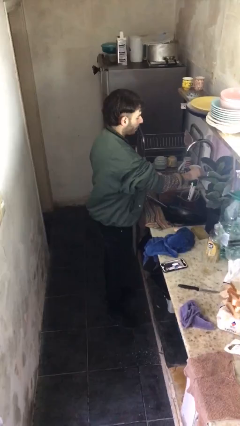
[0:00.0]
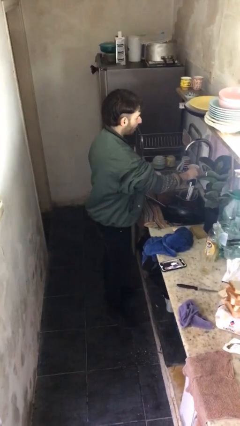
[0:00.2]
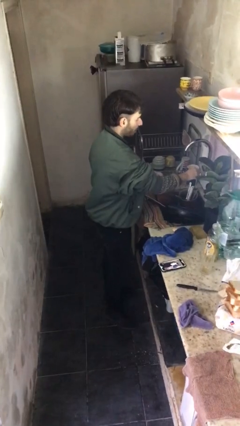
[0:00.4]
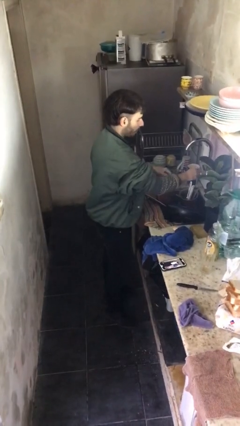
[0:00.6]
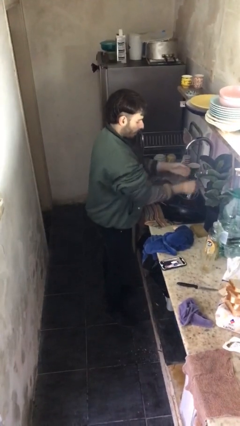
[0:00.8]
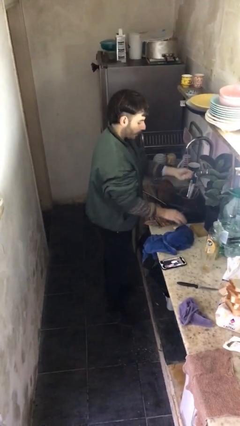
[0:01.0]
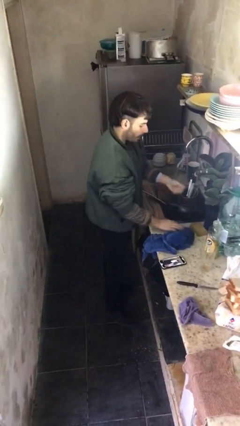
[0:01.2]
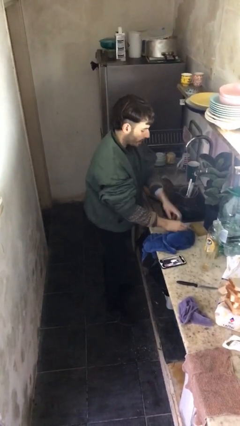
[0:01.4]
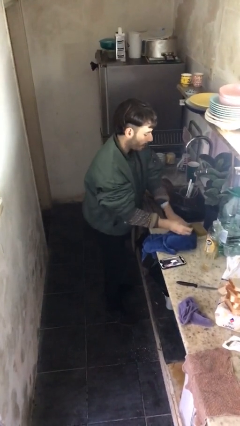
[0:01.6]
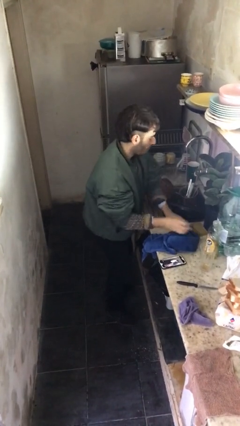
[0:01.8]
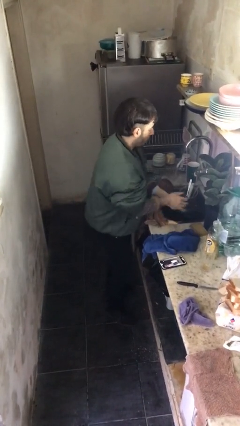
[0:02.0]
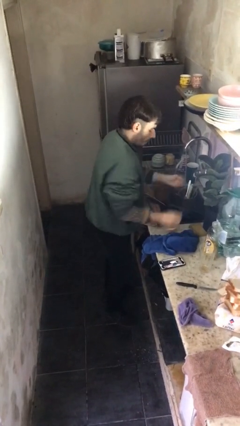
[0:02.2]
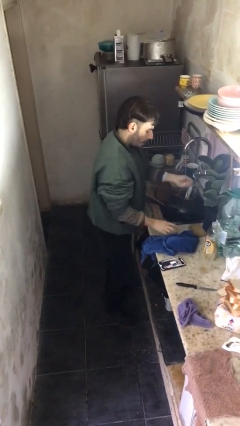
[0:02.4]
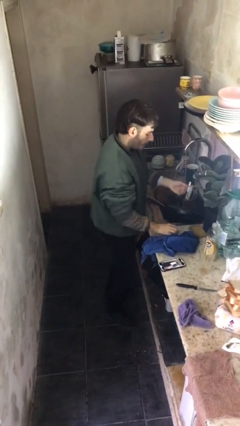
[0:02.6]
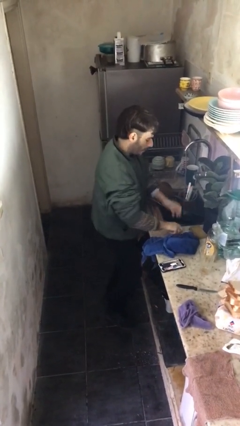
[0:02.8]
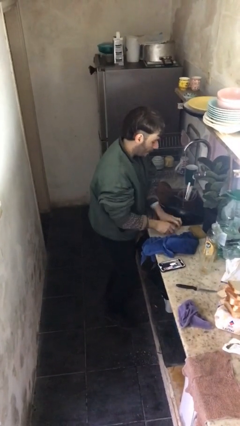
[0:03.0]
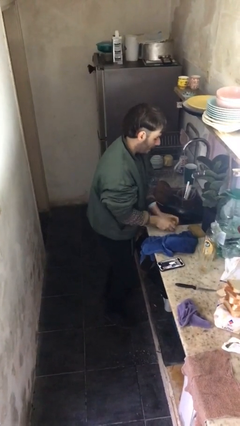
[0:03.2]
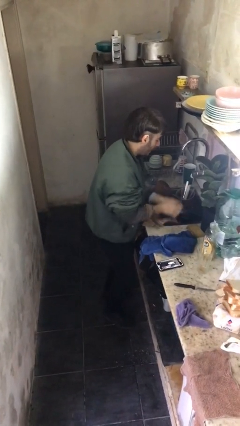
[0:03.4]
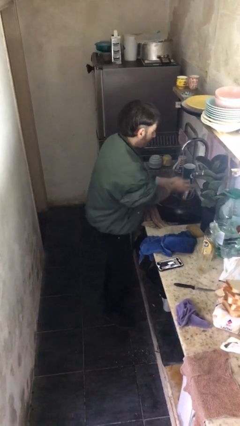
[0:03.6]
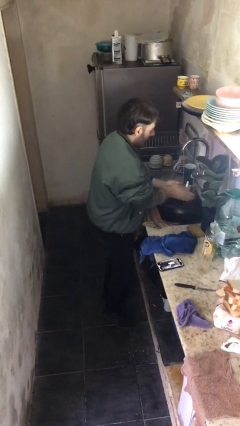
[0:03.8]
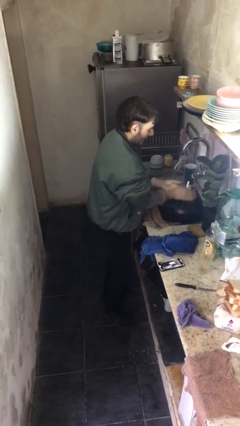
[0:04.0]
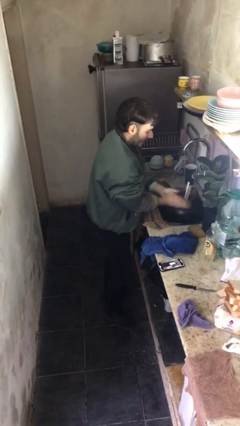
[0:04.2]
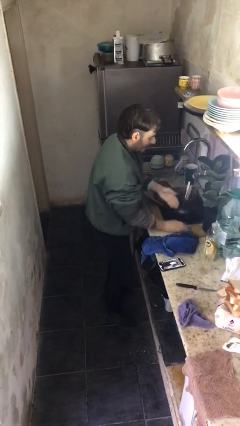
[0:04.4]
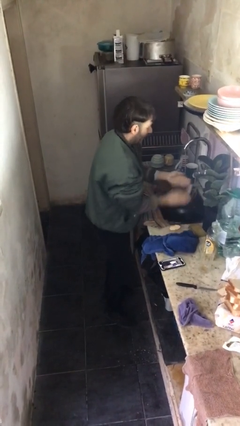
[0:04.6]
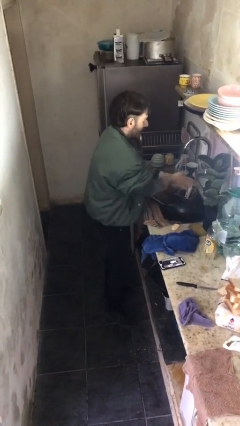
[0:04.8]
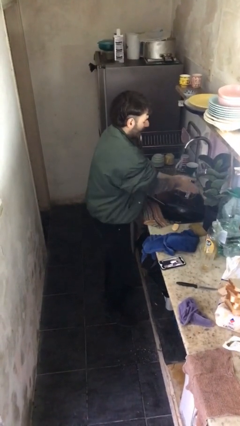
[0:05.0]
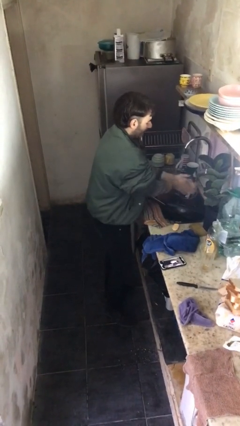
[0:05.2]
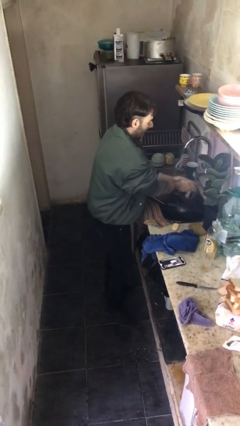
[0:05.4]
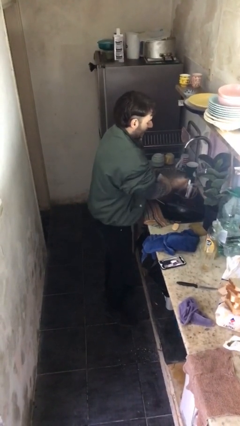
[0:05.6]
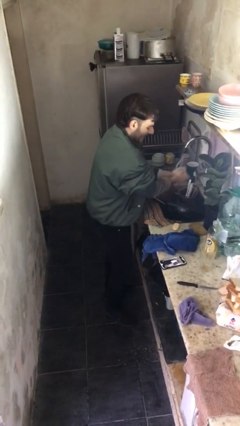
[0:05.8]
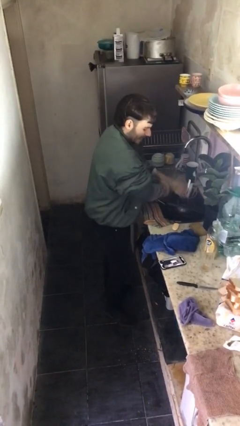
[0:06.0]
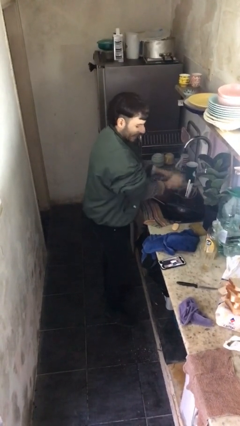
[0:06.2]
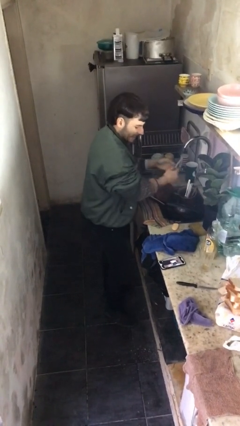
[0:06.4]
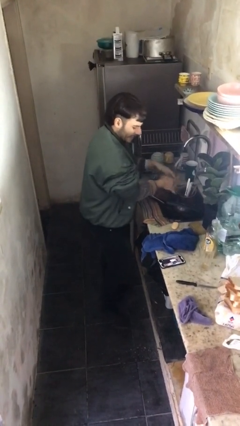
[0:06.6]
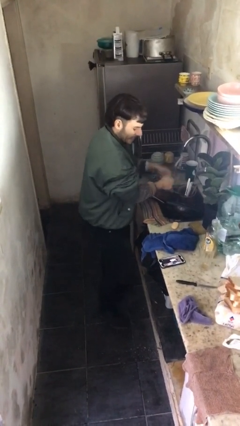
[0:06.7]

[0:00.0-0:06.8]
person washes hands

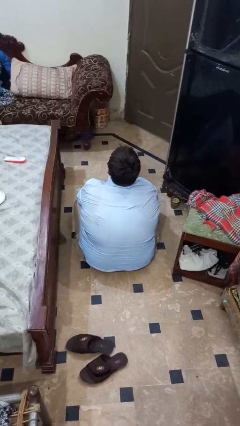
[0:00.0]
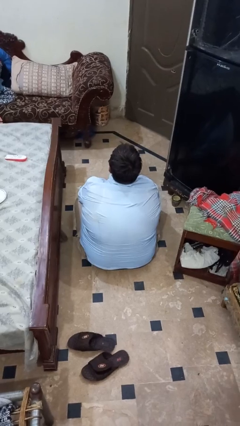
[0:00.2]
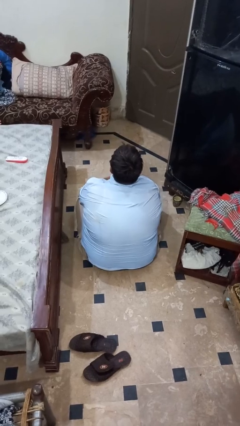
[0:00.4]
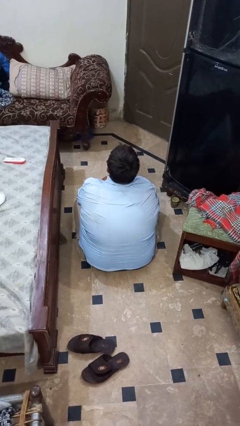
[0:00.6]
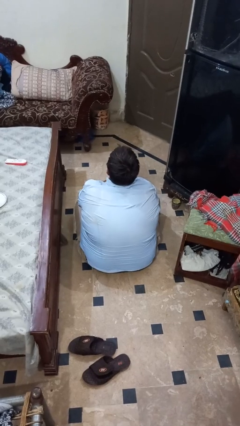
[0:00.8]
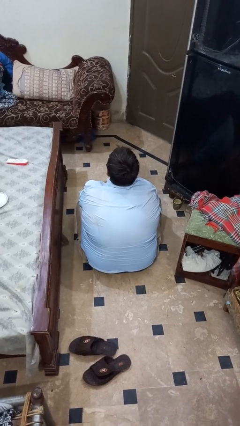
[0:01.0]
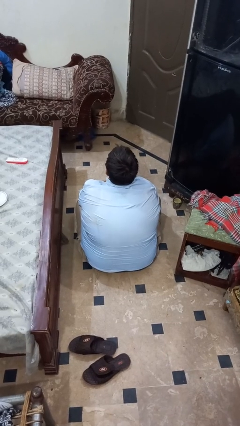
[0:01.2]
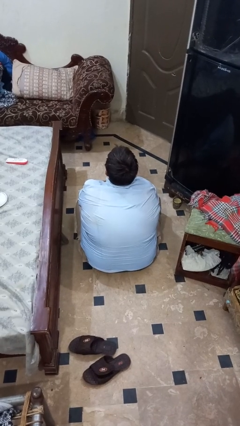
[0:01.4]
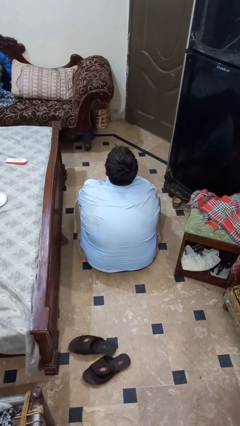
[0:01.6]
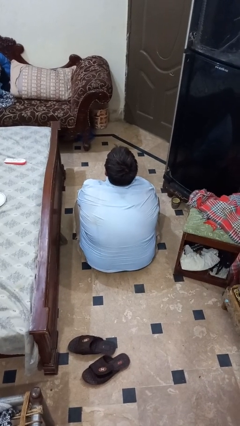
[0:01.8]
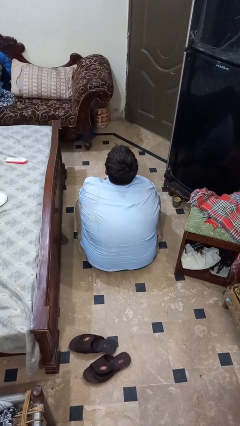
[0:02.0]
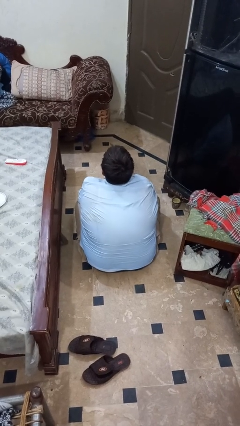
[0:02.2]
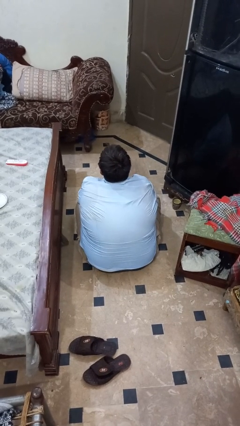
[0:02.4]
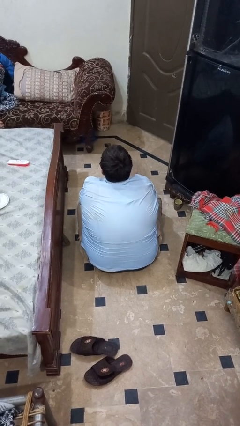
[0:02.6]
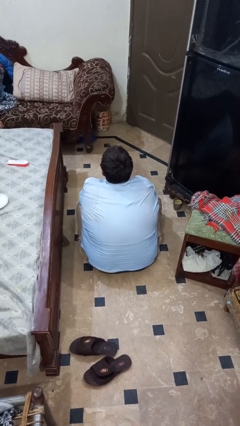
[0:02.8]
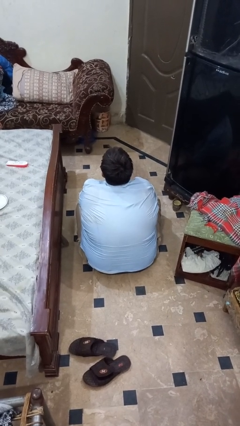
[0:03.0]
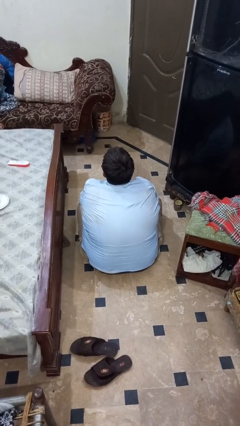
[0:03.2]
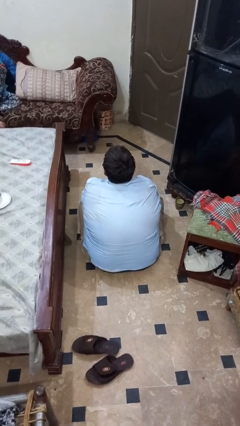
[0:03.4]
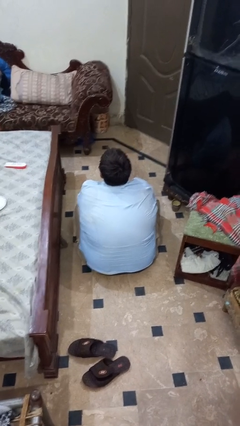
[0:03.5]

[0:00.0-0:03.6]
person strokes chin

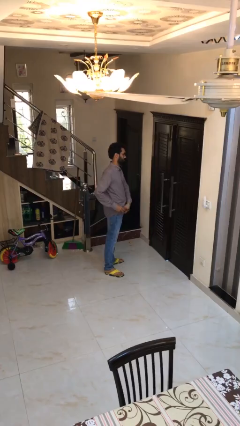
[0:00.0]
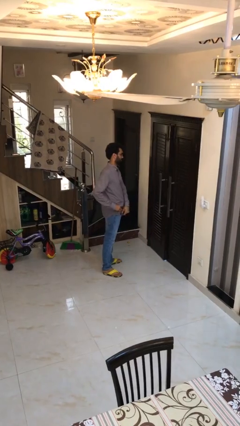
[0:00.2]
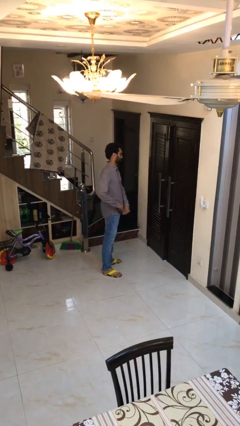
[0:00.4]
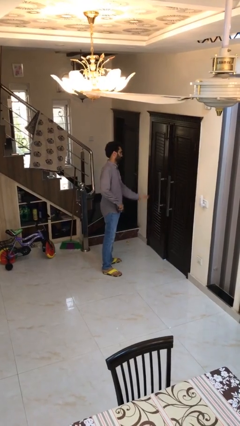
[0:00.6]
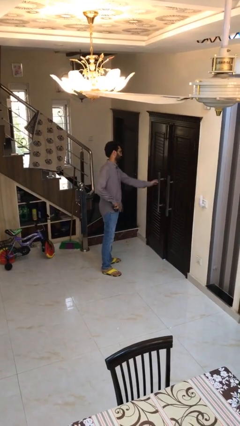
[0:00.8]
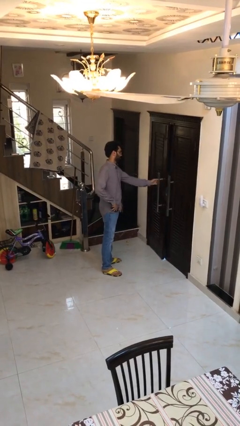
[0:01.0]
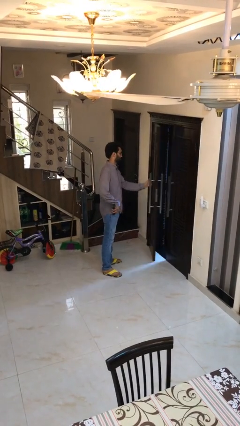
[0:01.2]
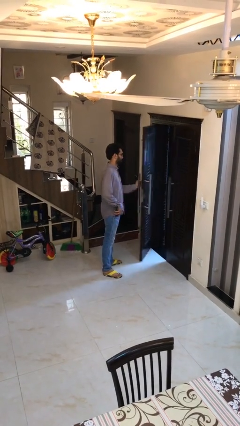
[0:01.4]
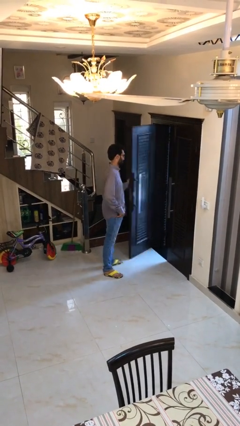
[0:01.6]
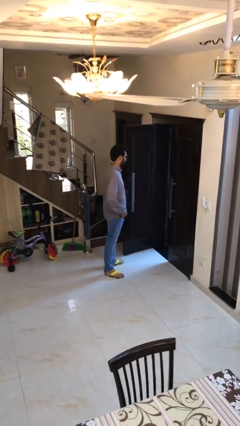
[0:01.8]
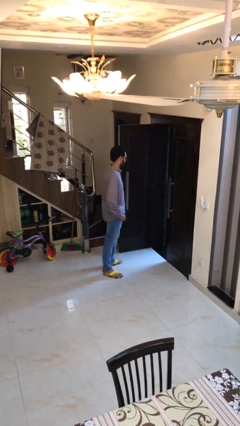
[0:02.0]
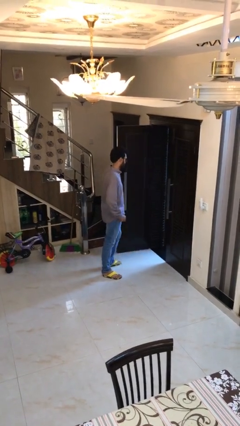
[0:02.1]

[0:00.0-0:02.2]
person opens facility door

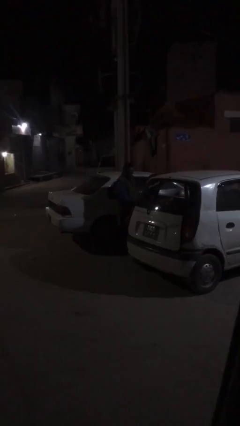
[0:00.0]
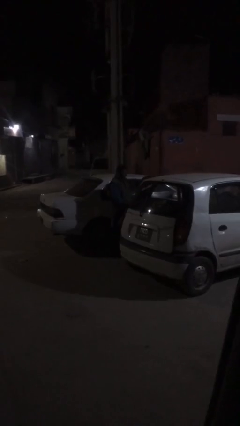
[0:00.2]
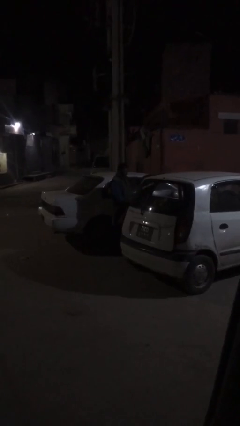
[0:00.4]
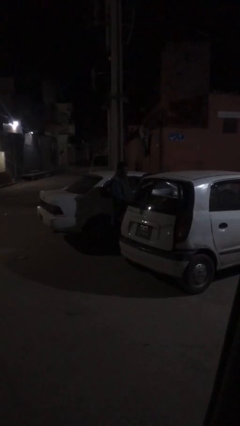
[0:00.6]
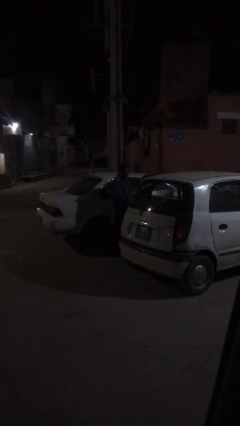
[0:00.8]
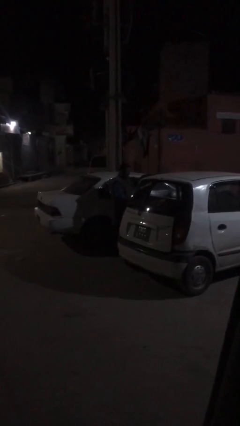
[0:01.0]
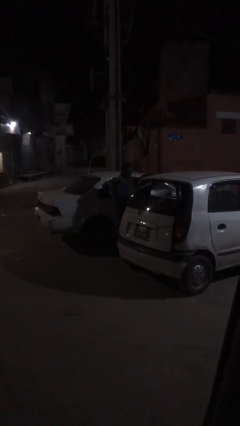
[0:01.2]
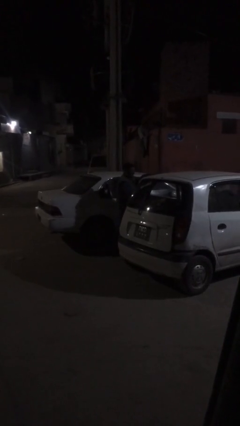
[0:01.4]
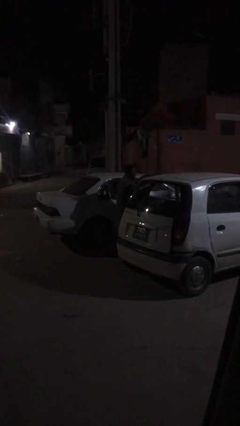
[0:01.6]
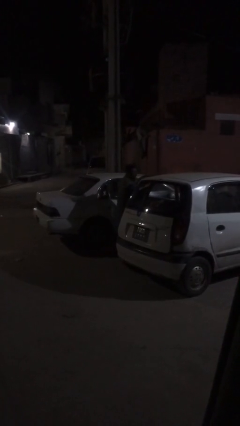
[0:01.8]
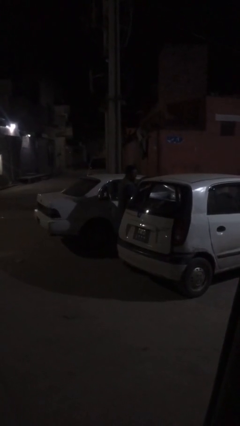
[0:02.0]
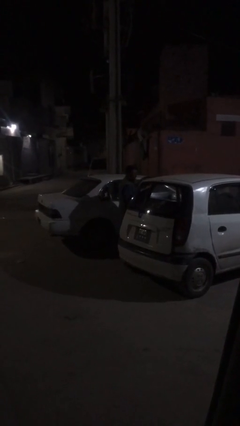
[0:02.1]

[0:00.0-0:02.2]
person loads car

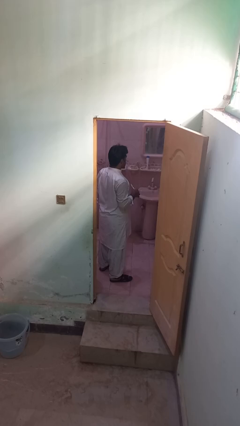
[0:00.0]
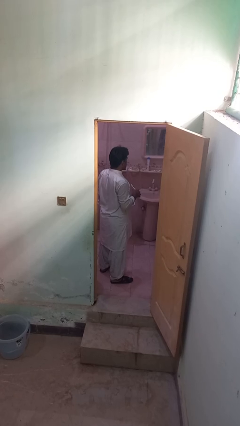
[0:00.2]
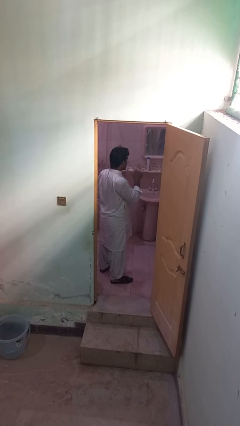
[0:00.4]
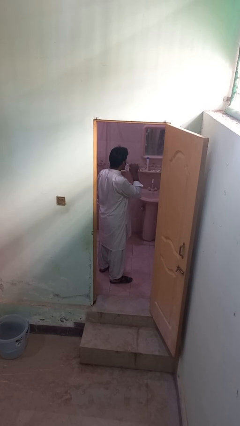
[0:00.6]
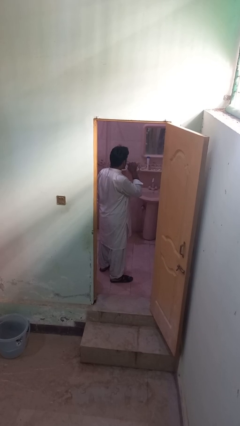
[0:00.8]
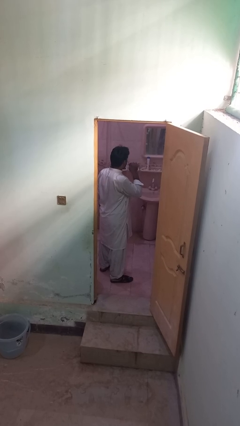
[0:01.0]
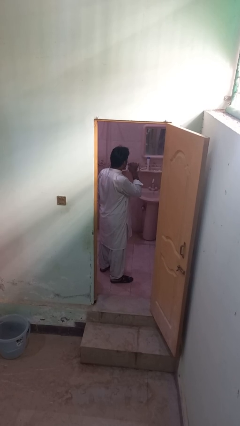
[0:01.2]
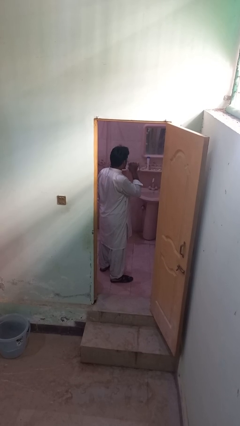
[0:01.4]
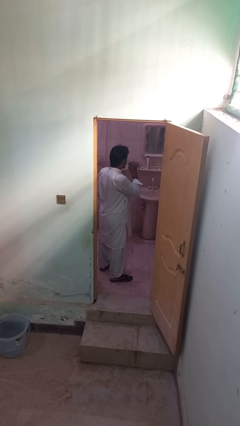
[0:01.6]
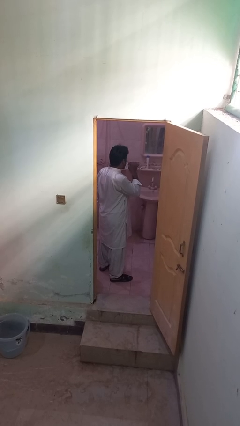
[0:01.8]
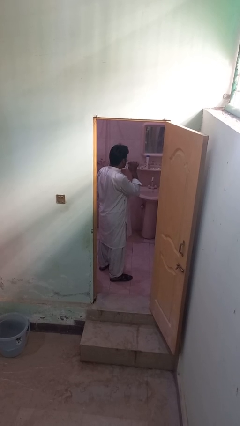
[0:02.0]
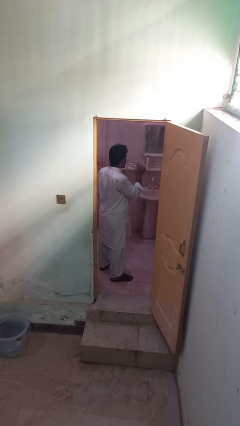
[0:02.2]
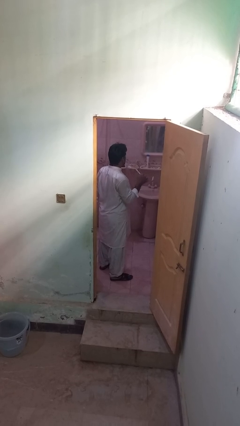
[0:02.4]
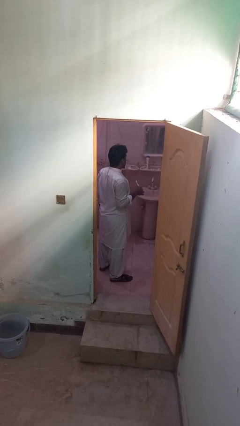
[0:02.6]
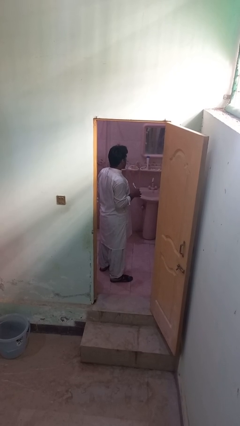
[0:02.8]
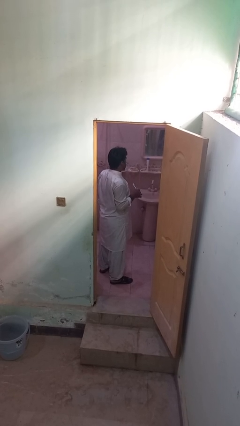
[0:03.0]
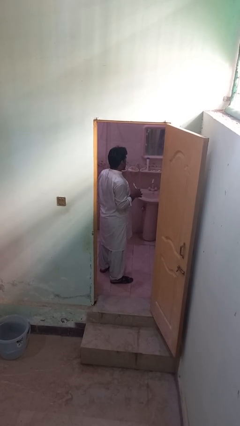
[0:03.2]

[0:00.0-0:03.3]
person brushes teeth
